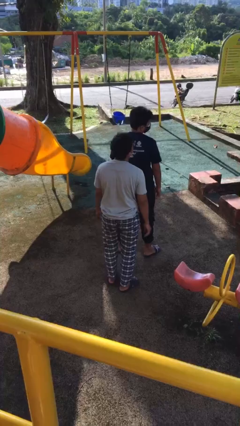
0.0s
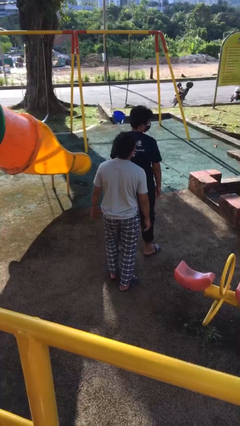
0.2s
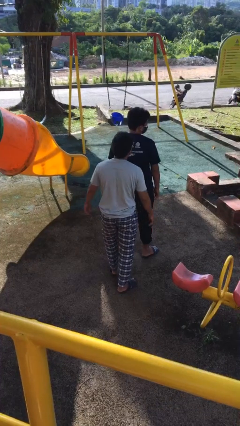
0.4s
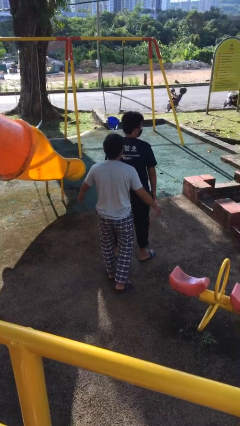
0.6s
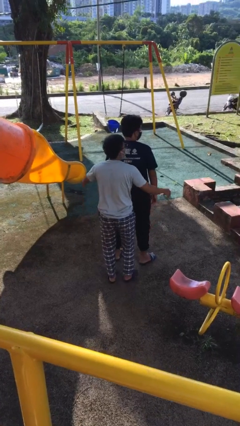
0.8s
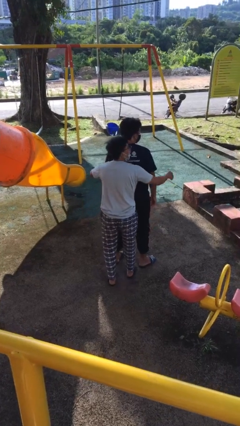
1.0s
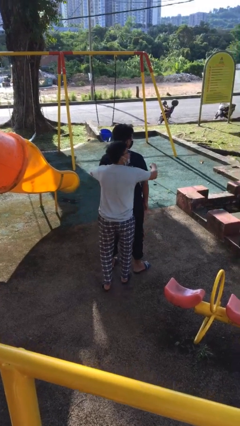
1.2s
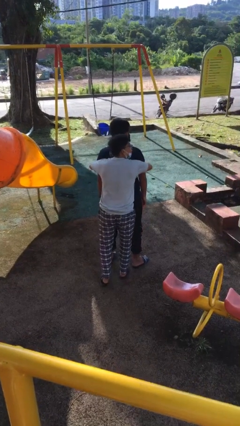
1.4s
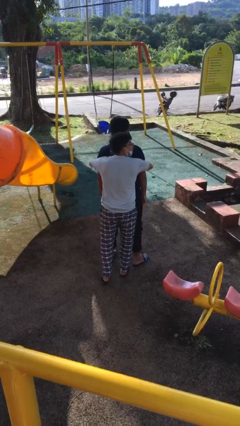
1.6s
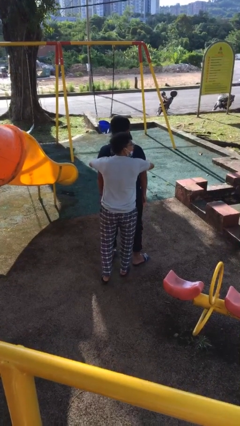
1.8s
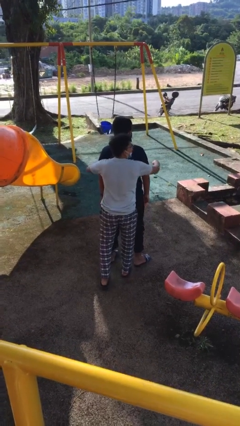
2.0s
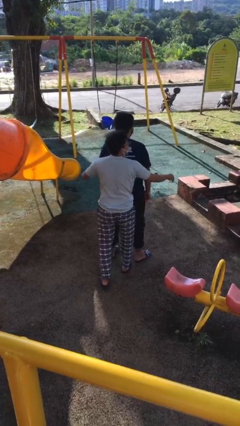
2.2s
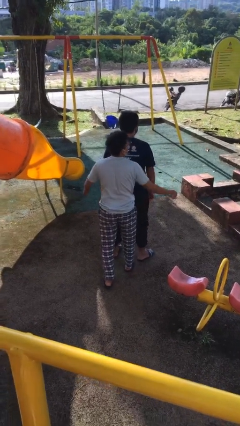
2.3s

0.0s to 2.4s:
person hugs person from behind

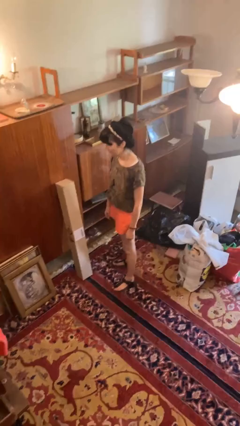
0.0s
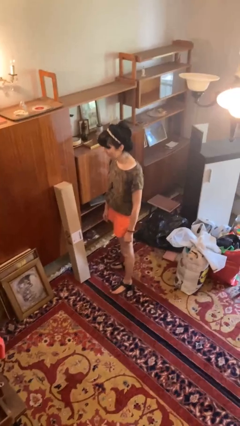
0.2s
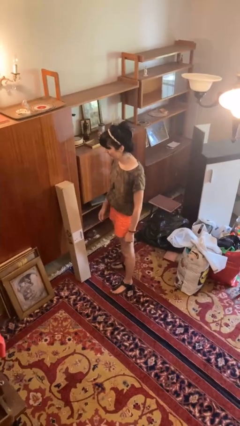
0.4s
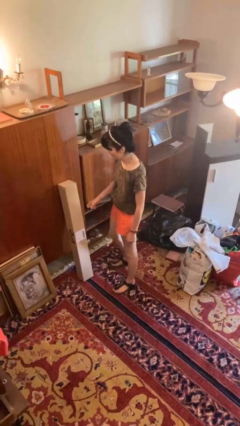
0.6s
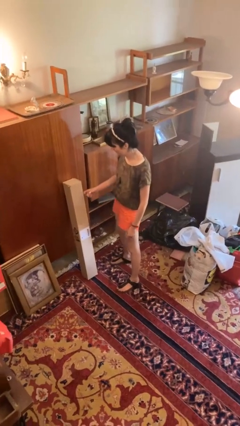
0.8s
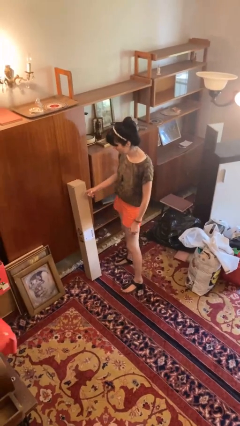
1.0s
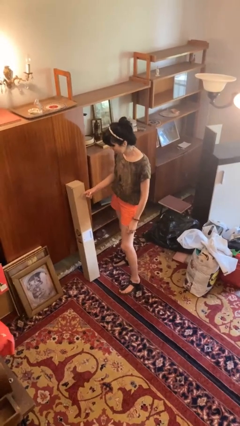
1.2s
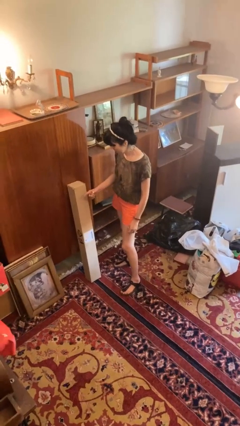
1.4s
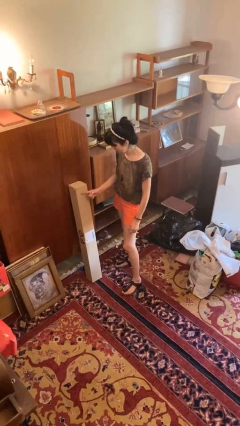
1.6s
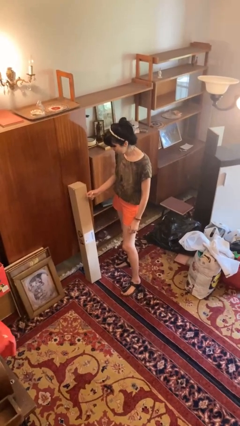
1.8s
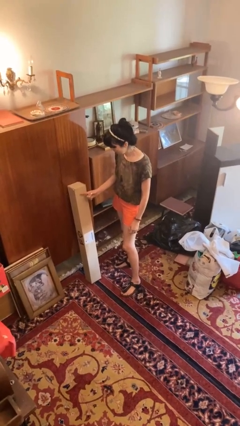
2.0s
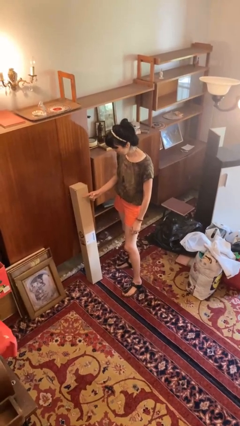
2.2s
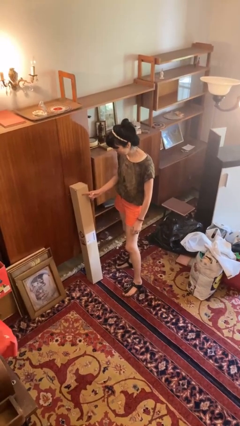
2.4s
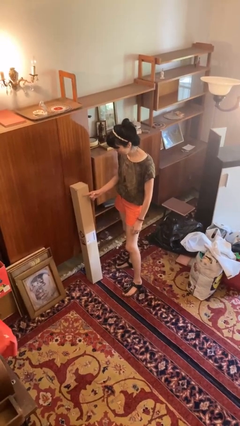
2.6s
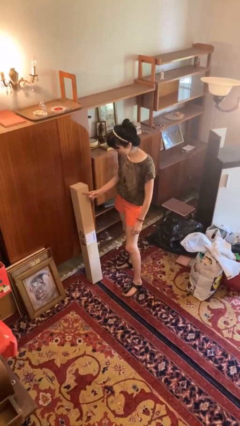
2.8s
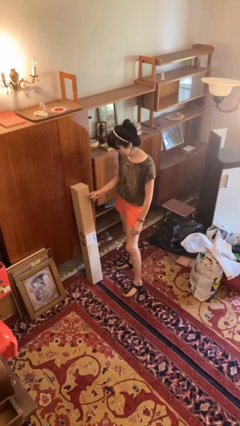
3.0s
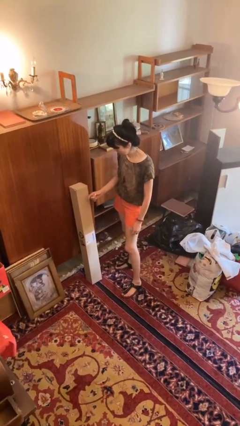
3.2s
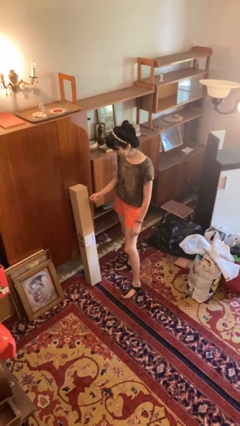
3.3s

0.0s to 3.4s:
person taps object with finger

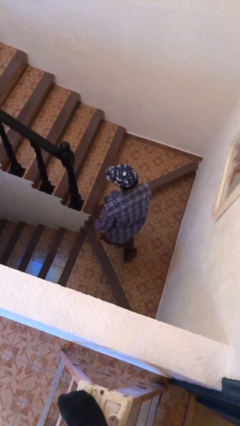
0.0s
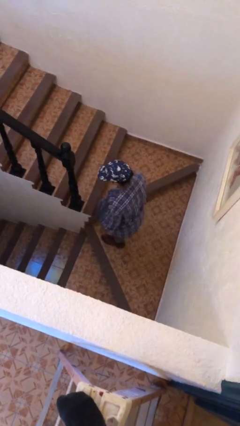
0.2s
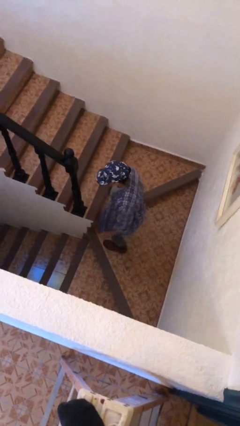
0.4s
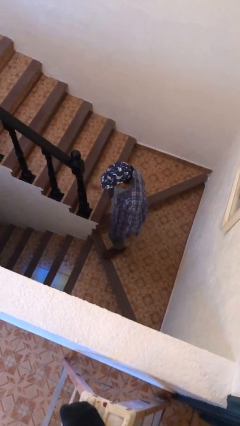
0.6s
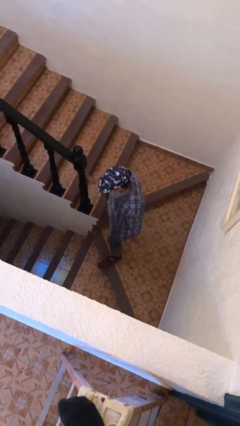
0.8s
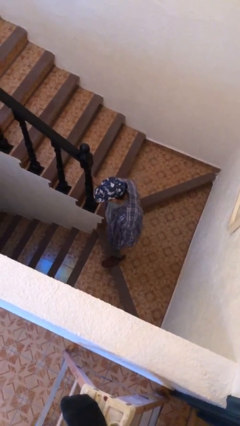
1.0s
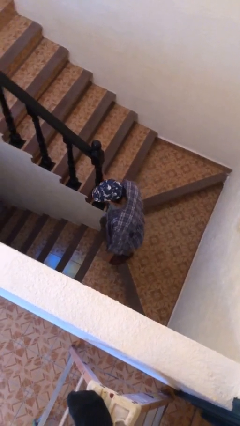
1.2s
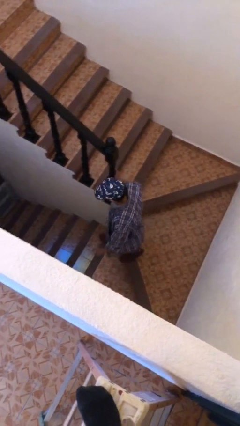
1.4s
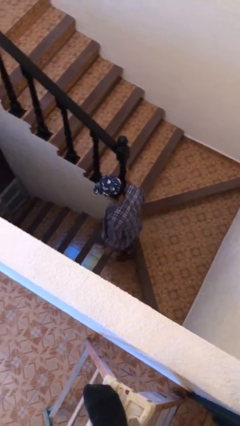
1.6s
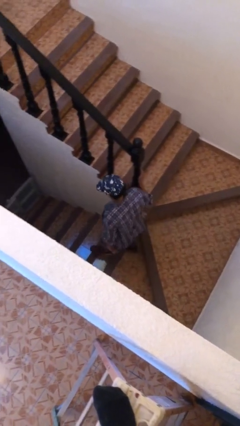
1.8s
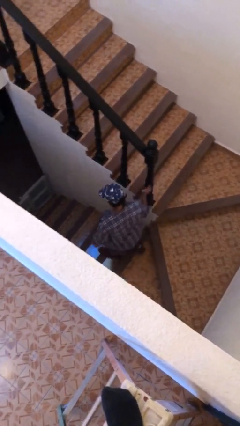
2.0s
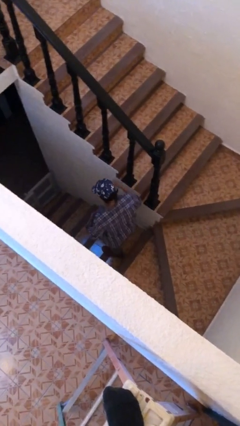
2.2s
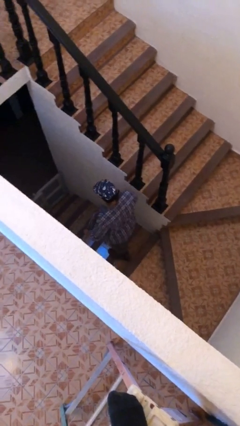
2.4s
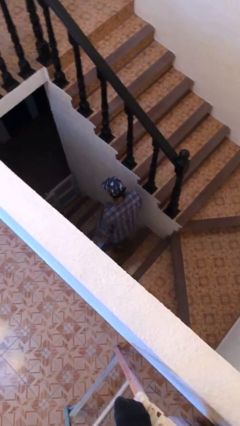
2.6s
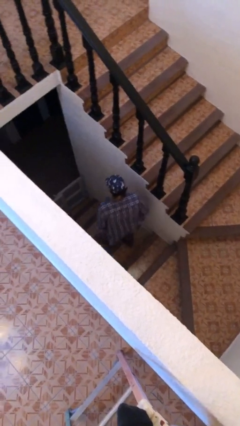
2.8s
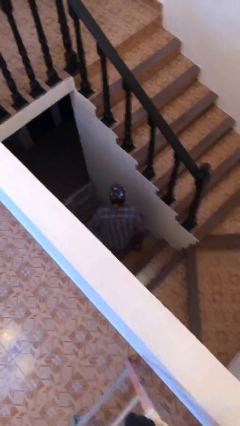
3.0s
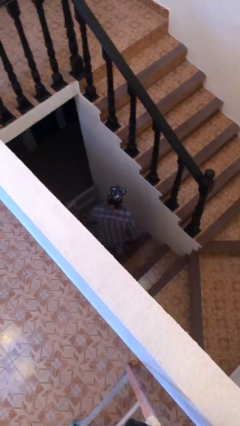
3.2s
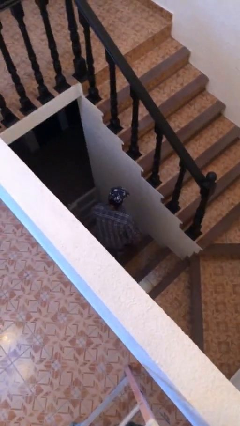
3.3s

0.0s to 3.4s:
person climbs down stairs

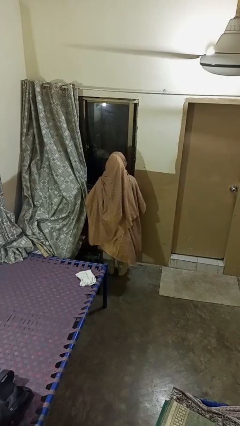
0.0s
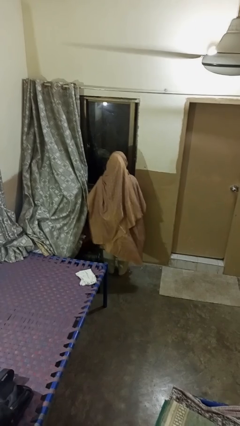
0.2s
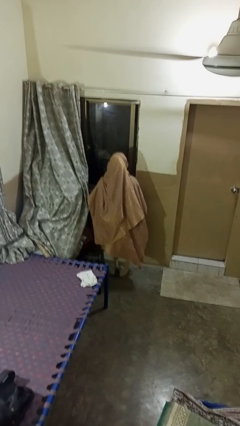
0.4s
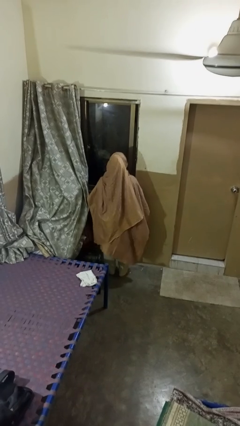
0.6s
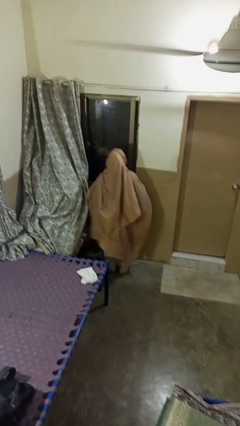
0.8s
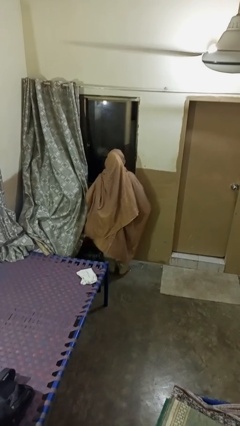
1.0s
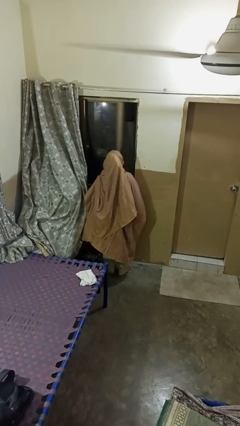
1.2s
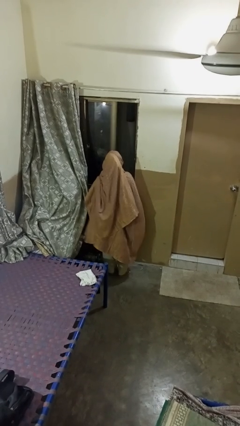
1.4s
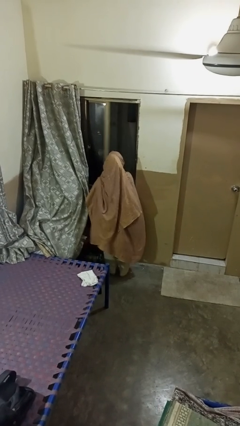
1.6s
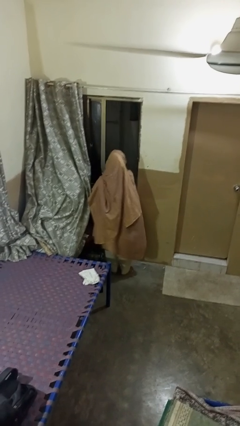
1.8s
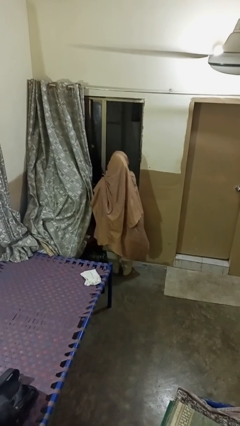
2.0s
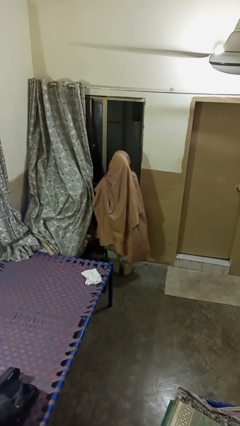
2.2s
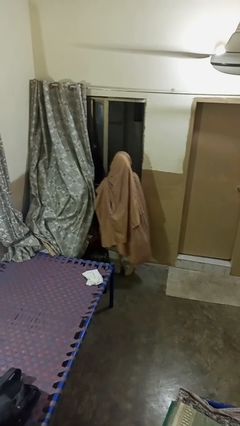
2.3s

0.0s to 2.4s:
person opens home window

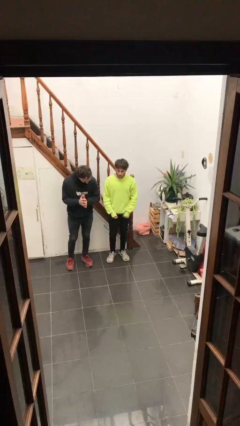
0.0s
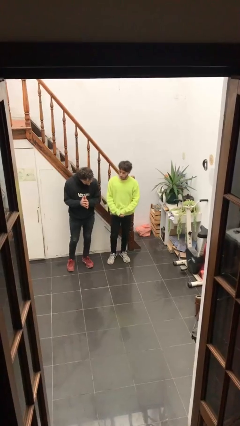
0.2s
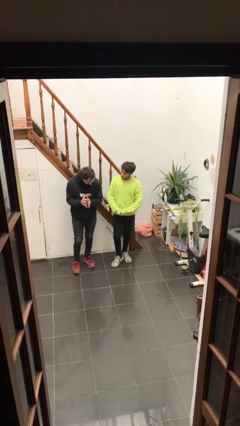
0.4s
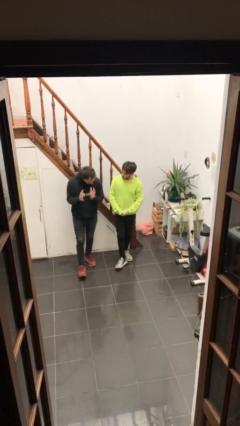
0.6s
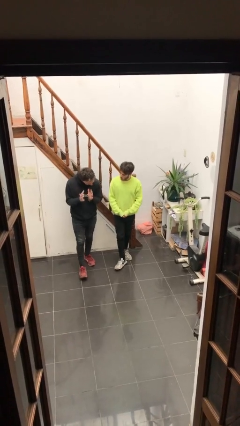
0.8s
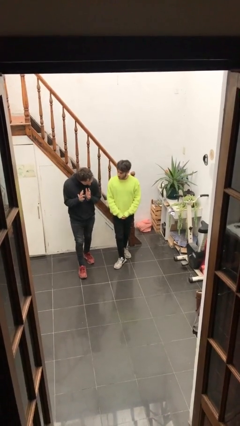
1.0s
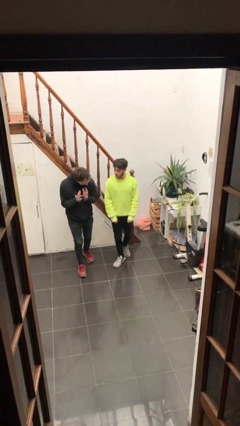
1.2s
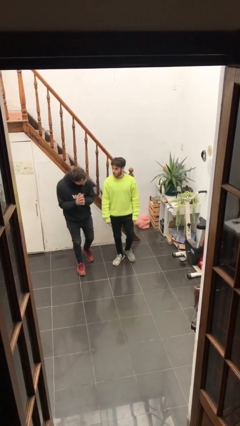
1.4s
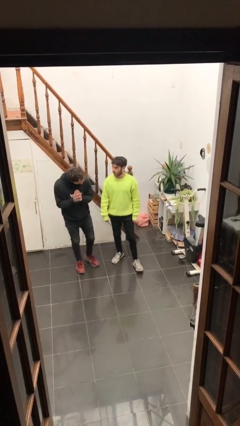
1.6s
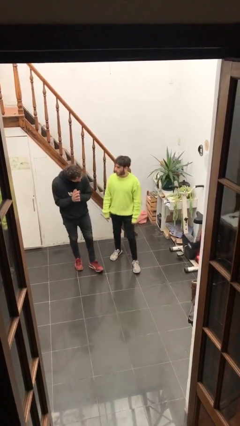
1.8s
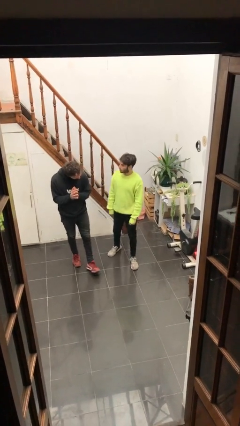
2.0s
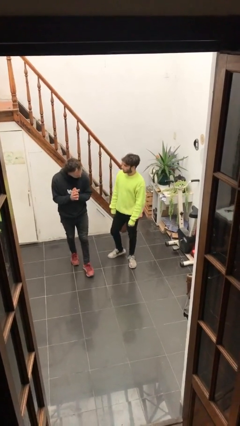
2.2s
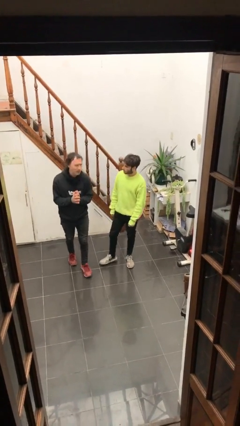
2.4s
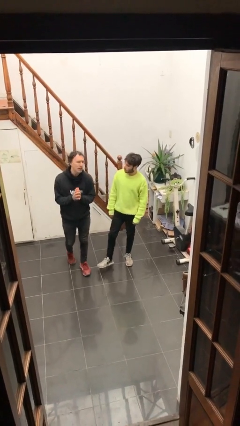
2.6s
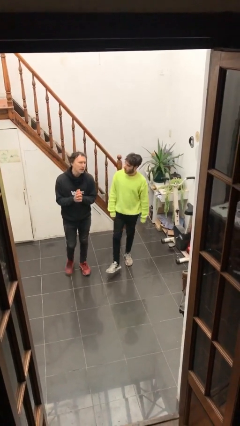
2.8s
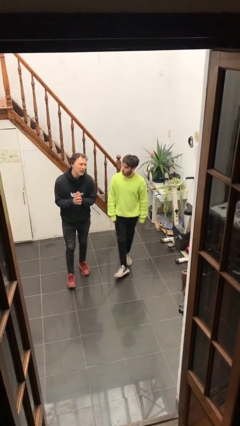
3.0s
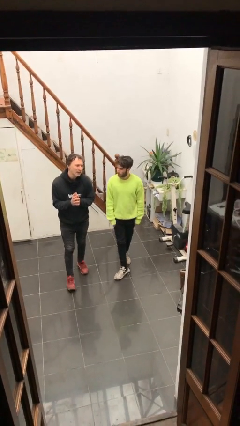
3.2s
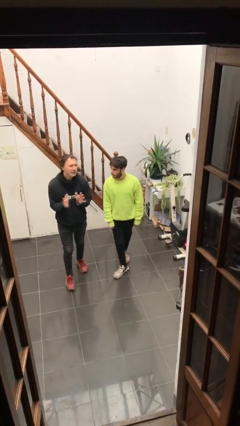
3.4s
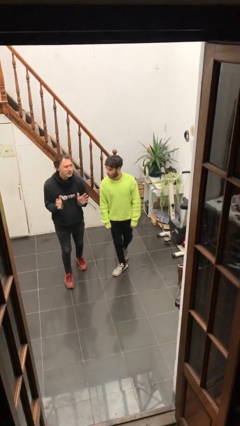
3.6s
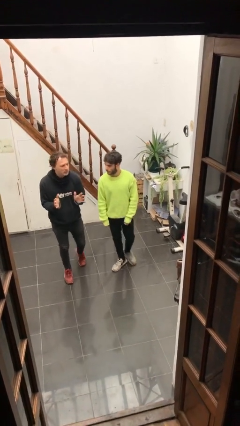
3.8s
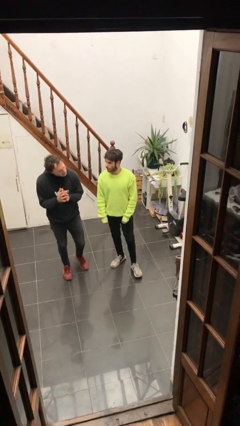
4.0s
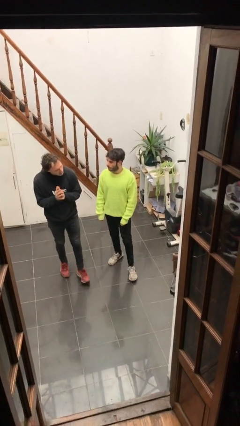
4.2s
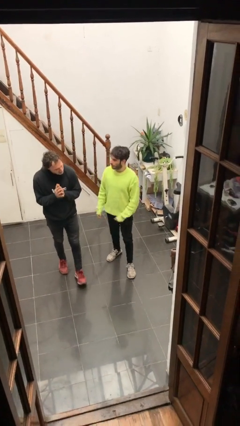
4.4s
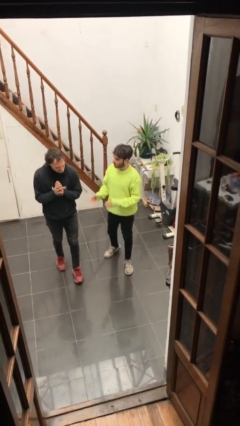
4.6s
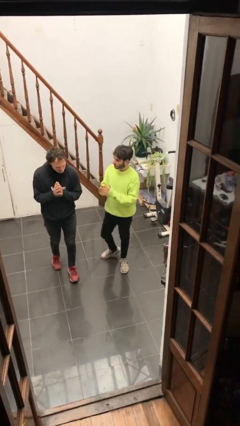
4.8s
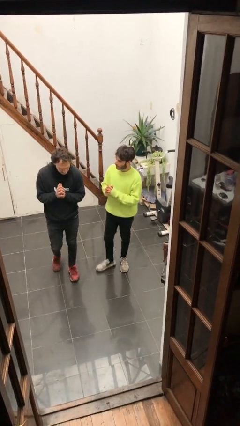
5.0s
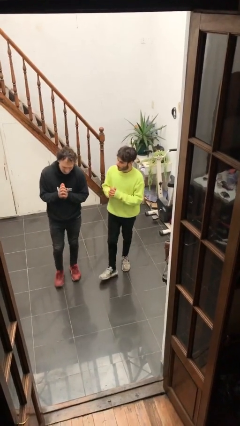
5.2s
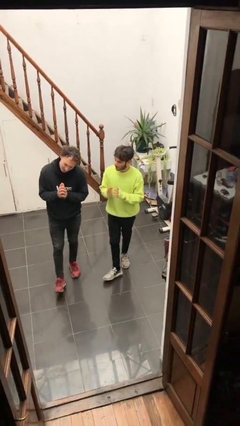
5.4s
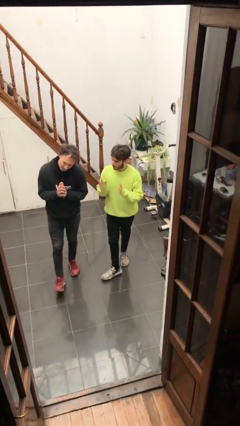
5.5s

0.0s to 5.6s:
person talks to person

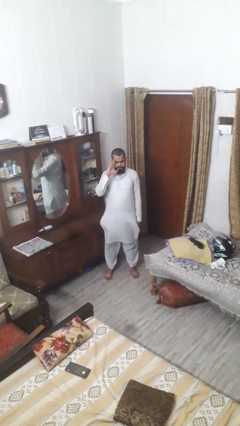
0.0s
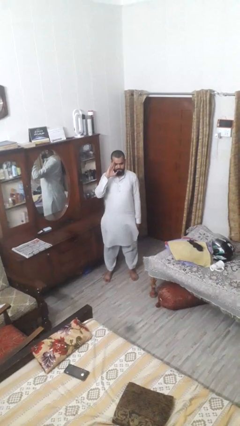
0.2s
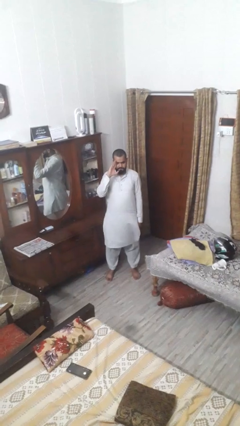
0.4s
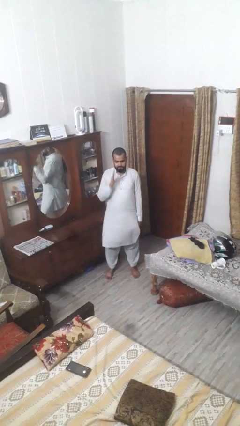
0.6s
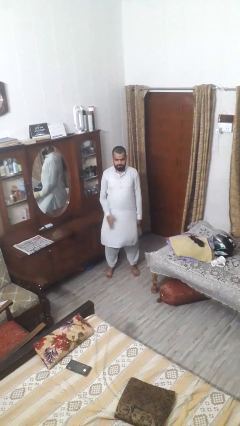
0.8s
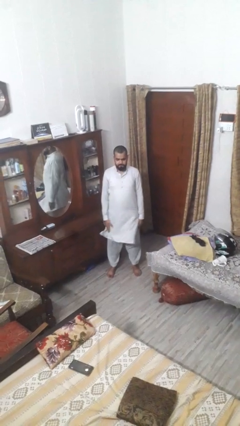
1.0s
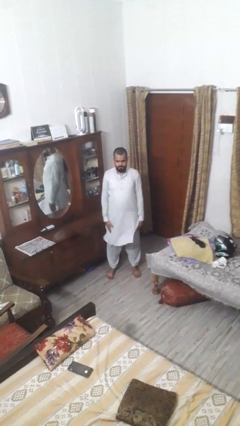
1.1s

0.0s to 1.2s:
person salutes
